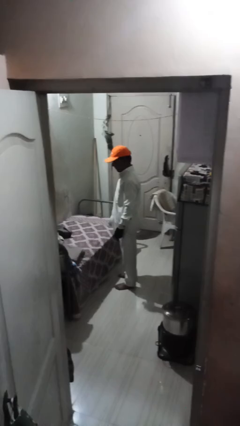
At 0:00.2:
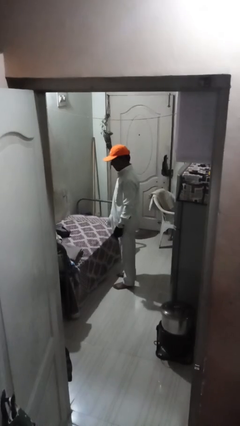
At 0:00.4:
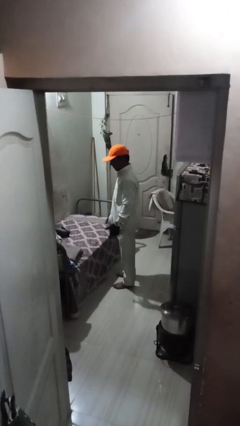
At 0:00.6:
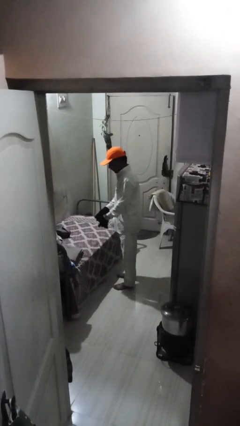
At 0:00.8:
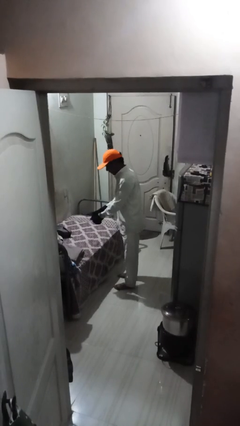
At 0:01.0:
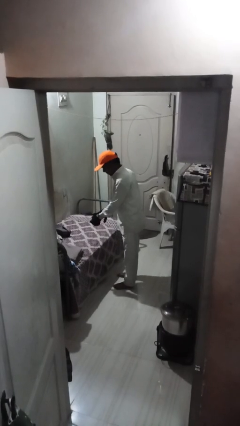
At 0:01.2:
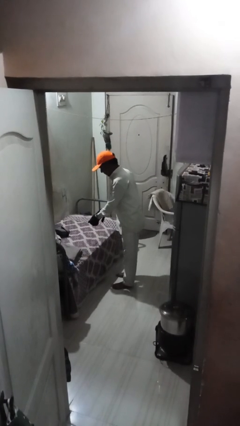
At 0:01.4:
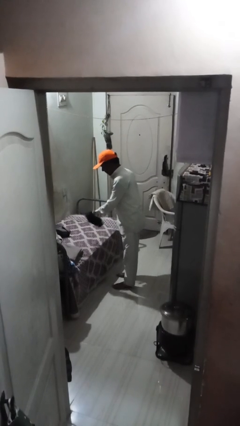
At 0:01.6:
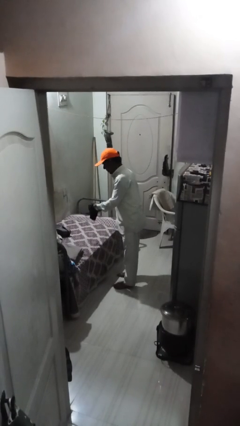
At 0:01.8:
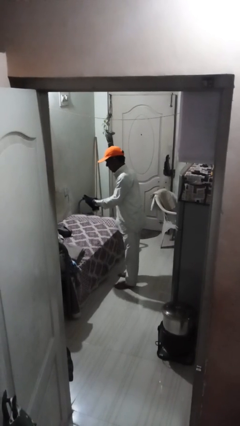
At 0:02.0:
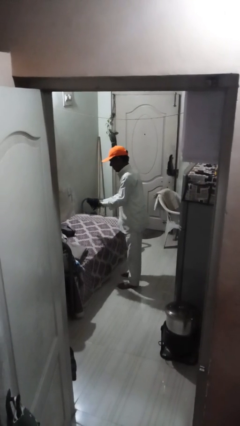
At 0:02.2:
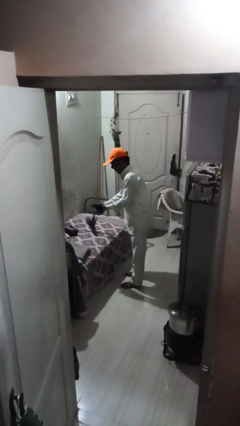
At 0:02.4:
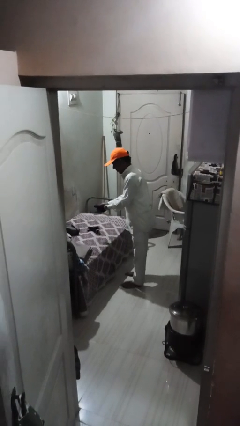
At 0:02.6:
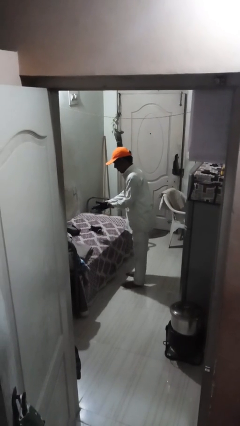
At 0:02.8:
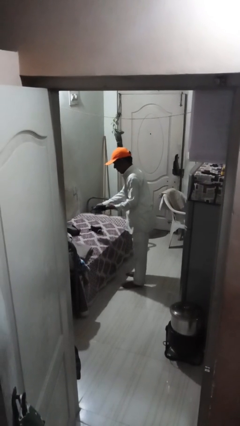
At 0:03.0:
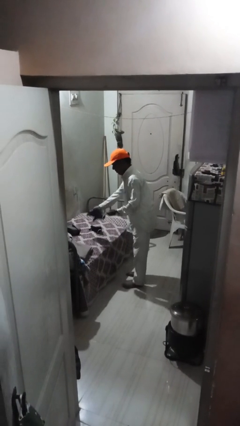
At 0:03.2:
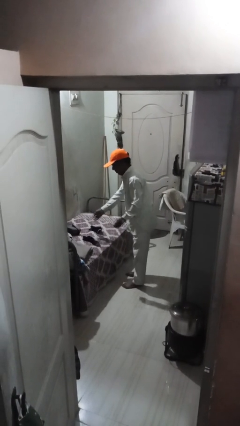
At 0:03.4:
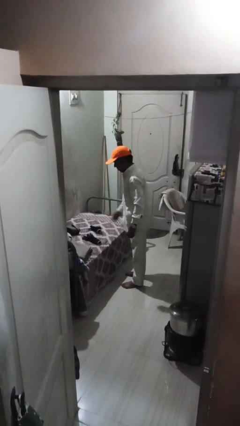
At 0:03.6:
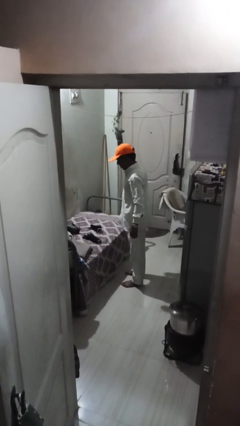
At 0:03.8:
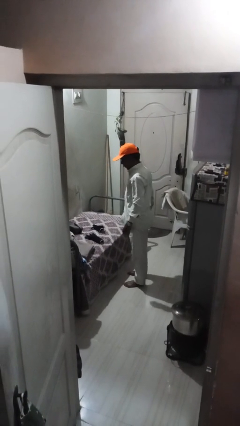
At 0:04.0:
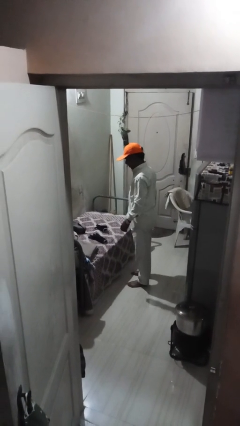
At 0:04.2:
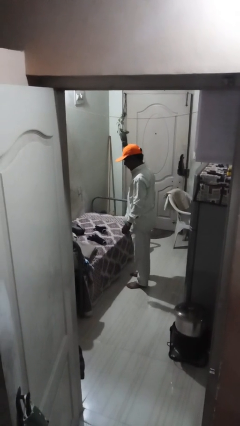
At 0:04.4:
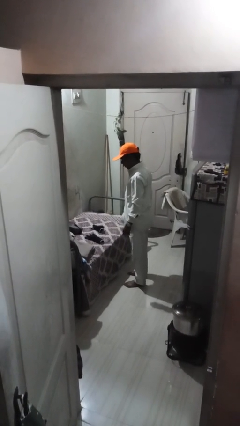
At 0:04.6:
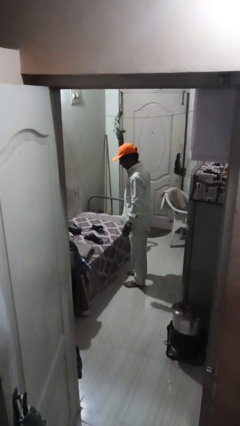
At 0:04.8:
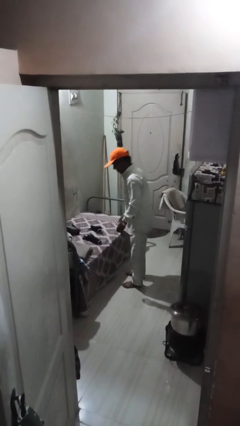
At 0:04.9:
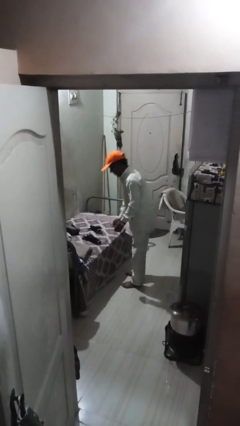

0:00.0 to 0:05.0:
person takes off gloves

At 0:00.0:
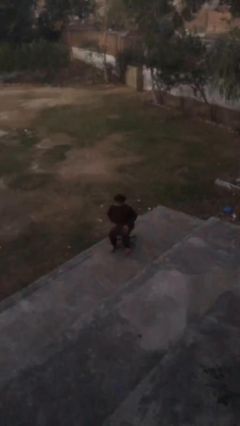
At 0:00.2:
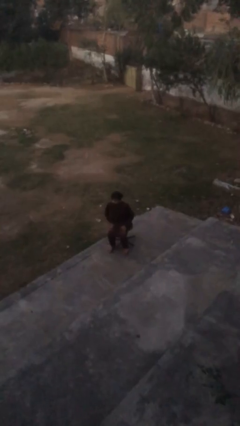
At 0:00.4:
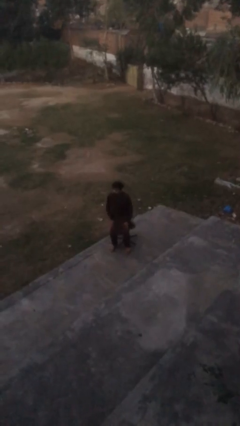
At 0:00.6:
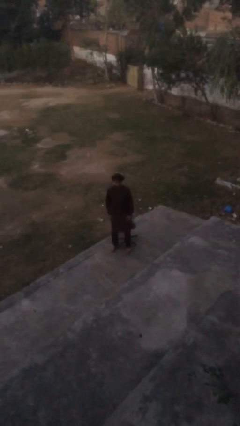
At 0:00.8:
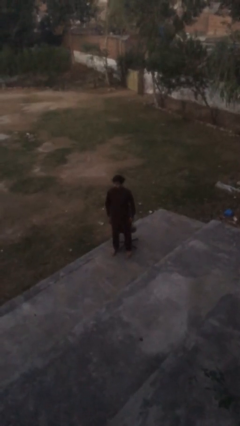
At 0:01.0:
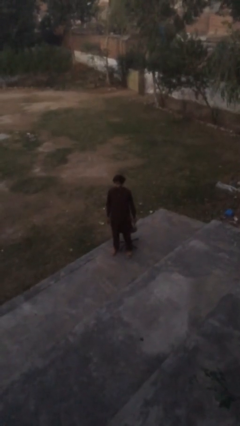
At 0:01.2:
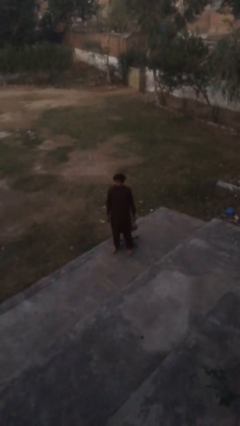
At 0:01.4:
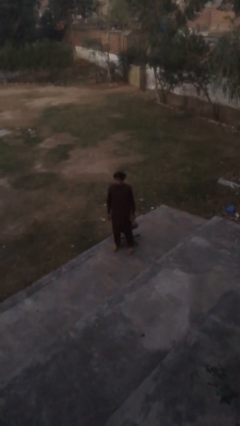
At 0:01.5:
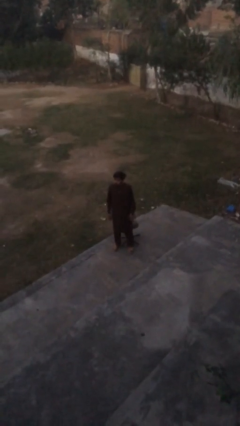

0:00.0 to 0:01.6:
person stands up

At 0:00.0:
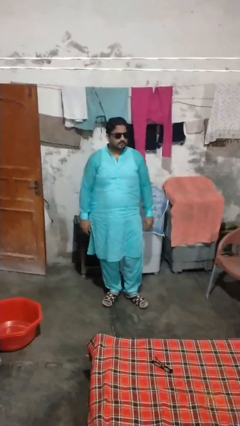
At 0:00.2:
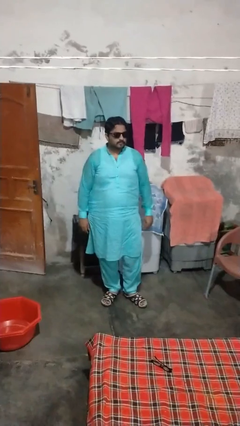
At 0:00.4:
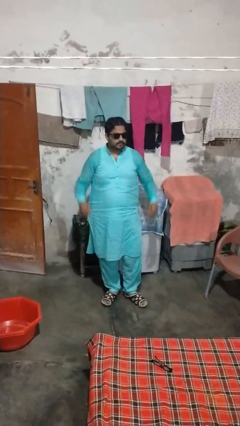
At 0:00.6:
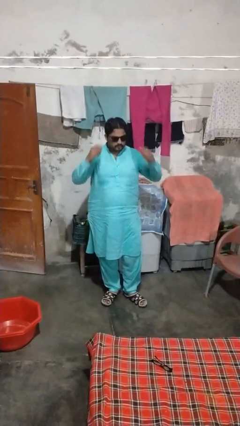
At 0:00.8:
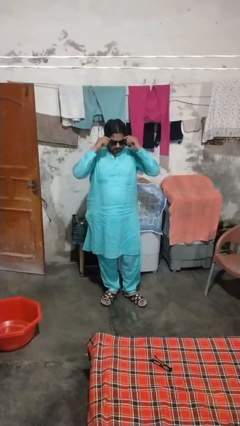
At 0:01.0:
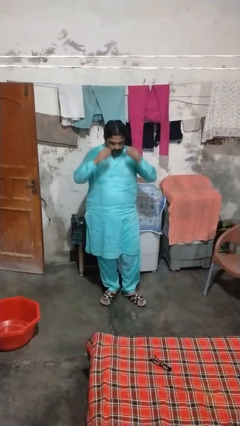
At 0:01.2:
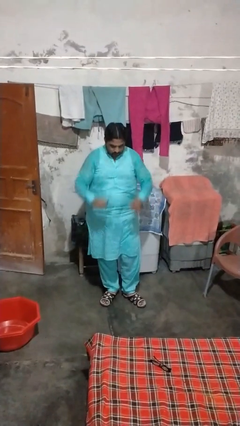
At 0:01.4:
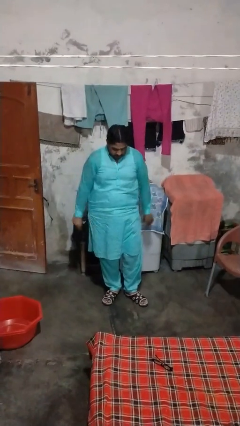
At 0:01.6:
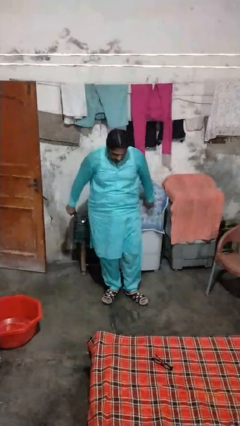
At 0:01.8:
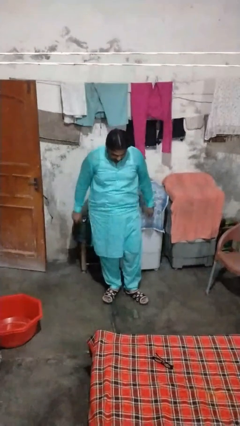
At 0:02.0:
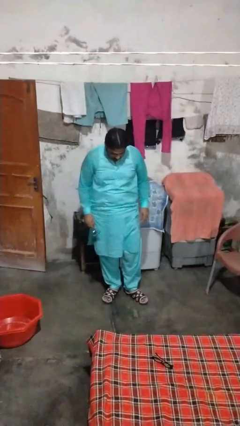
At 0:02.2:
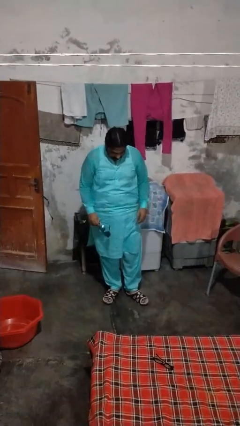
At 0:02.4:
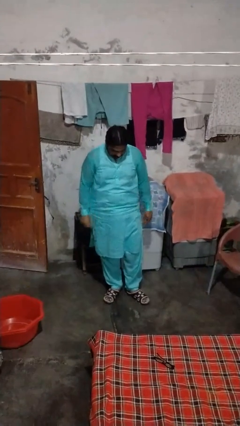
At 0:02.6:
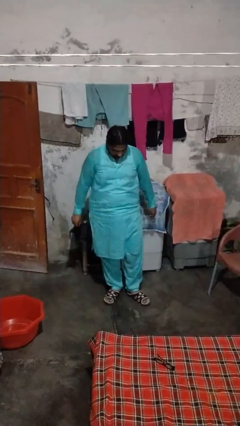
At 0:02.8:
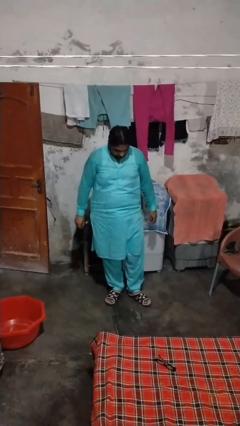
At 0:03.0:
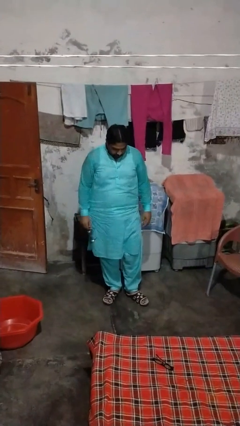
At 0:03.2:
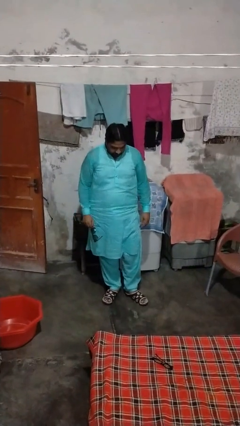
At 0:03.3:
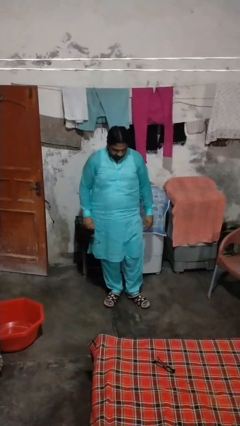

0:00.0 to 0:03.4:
person takes off sunglasses

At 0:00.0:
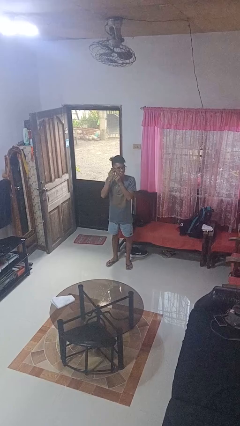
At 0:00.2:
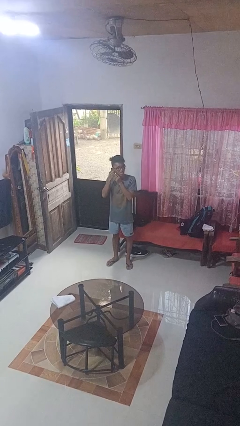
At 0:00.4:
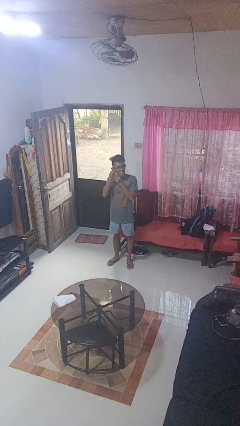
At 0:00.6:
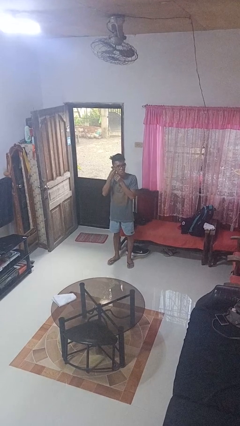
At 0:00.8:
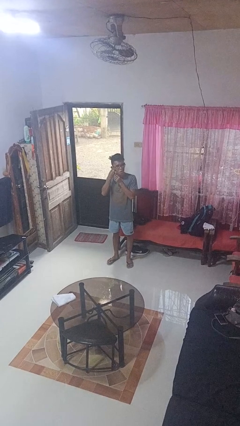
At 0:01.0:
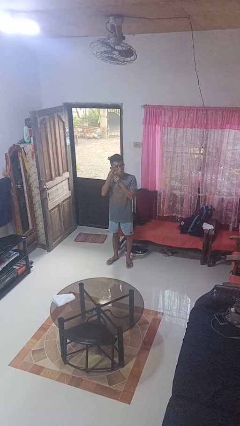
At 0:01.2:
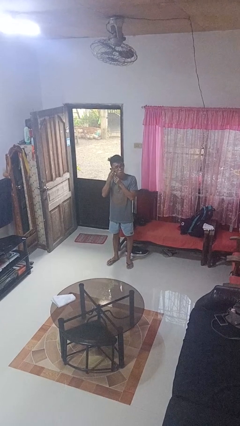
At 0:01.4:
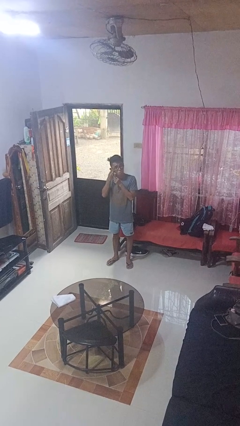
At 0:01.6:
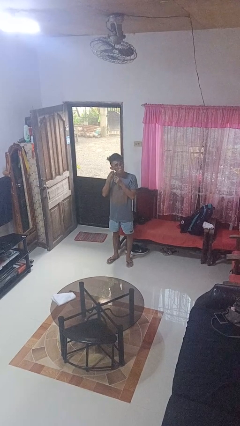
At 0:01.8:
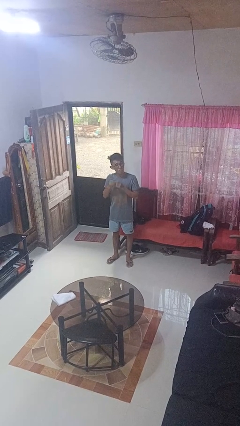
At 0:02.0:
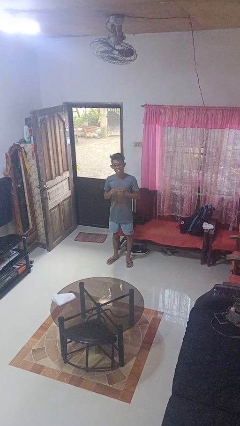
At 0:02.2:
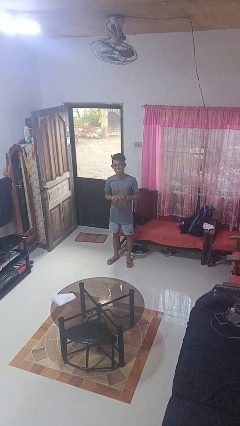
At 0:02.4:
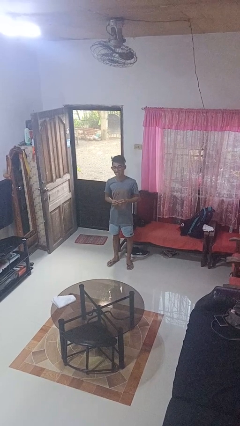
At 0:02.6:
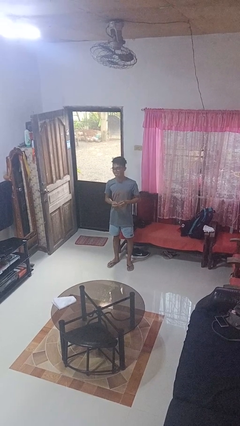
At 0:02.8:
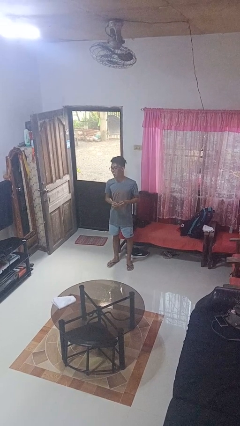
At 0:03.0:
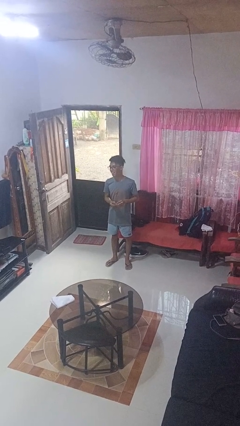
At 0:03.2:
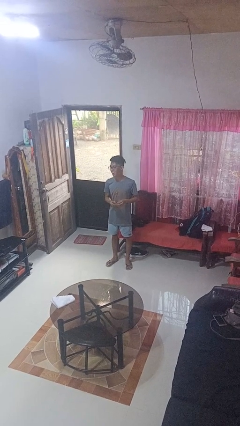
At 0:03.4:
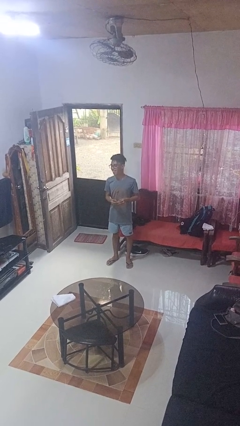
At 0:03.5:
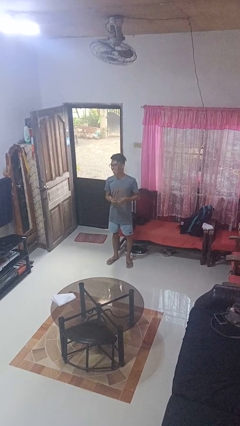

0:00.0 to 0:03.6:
person takes off earrings

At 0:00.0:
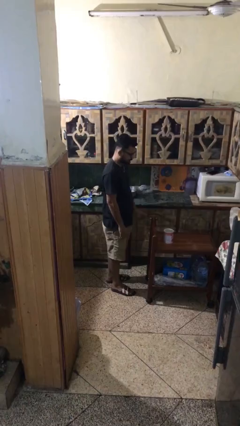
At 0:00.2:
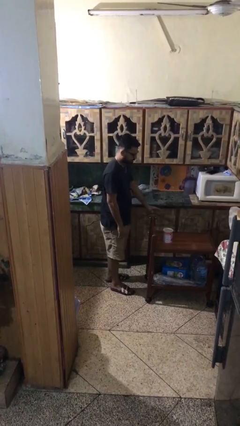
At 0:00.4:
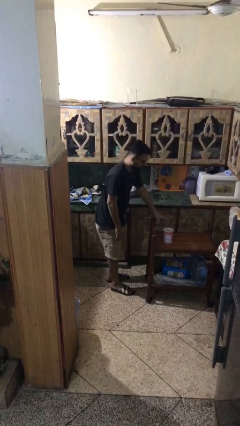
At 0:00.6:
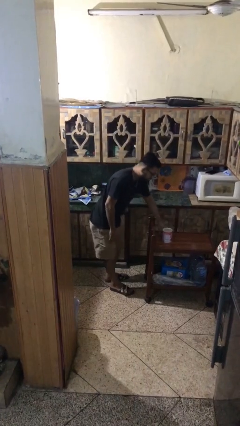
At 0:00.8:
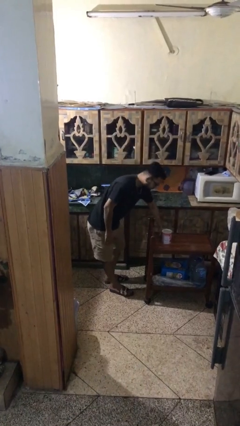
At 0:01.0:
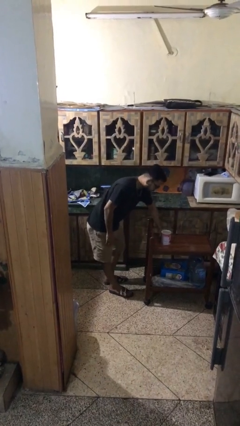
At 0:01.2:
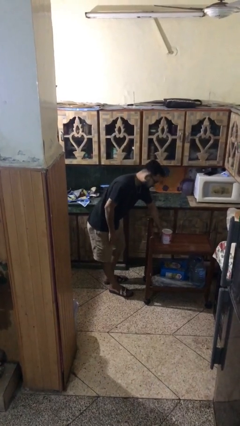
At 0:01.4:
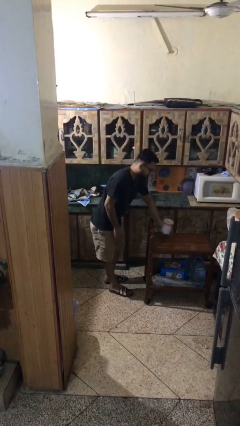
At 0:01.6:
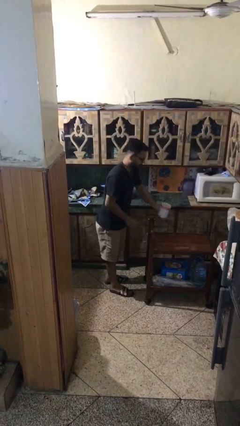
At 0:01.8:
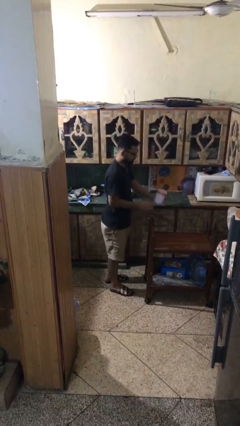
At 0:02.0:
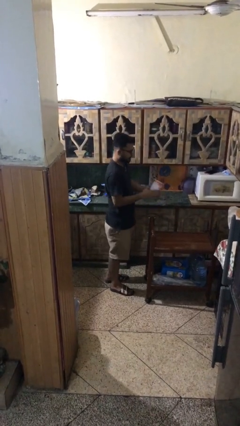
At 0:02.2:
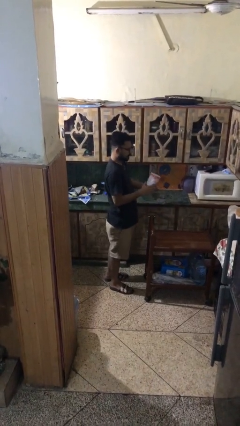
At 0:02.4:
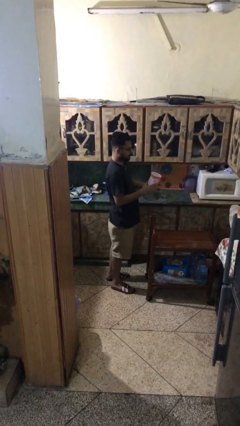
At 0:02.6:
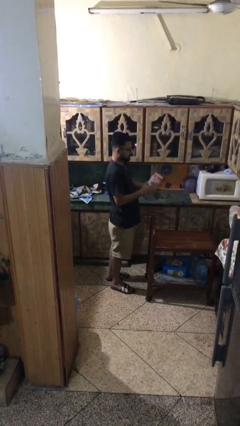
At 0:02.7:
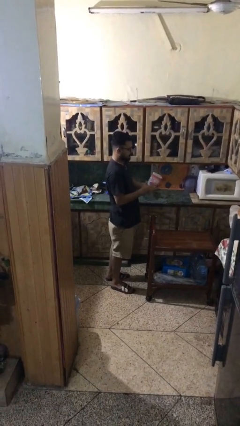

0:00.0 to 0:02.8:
person picks up object from table

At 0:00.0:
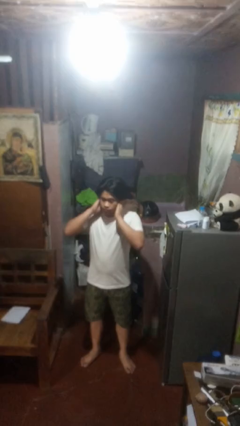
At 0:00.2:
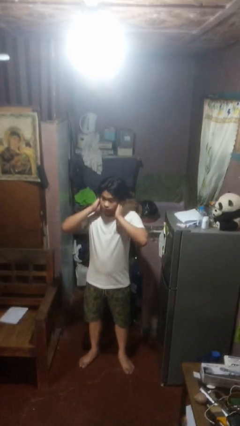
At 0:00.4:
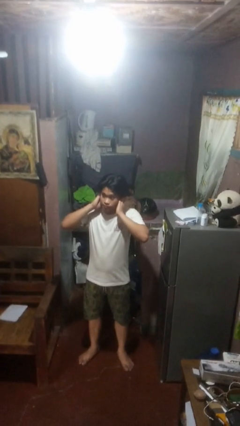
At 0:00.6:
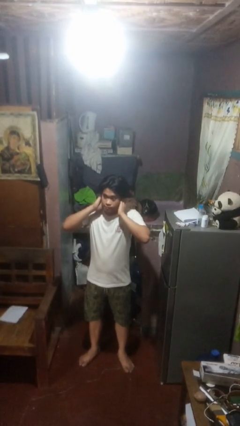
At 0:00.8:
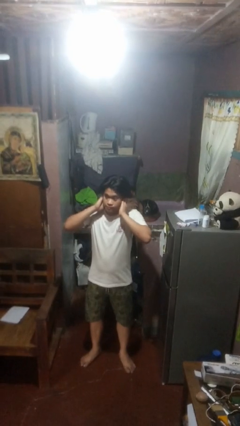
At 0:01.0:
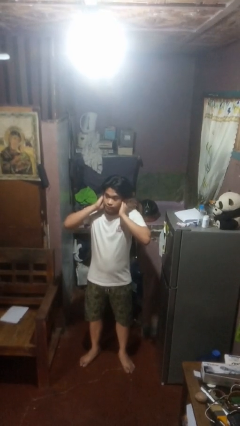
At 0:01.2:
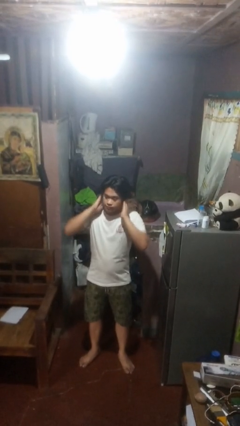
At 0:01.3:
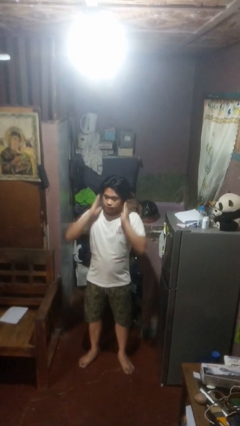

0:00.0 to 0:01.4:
person puts fingers in ear
